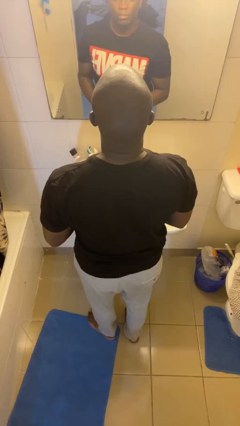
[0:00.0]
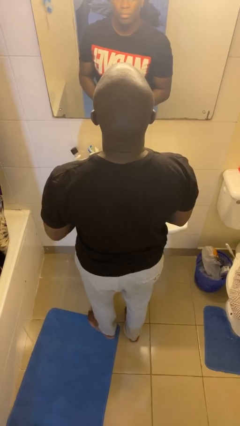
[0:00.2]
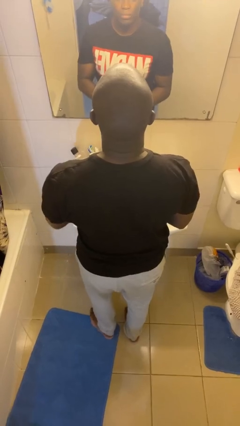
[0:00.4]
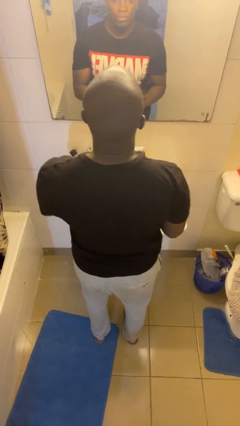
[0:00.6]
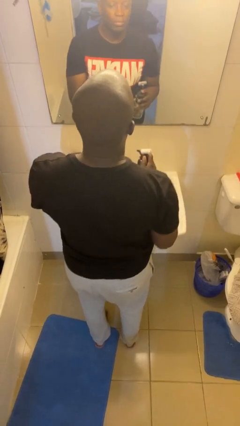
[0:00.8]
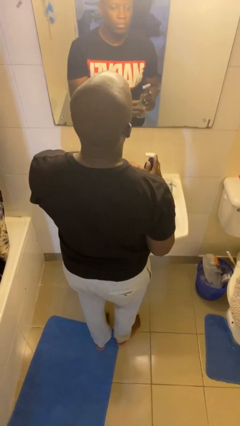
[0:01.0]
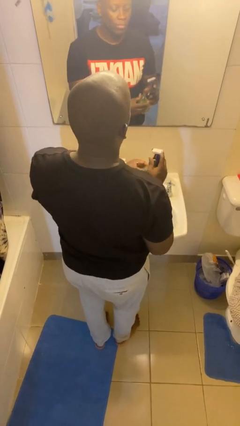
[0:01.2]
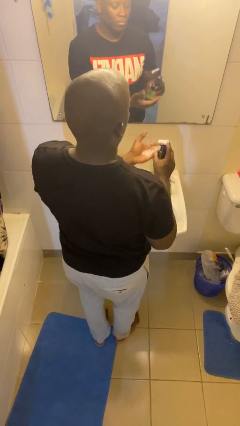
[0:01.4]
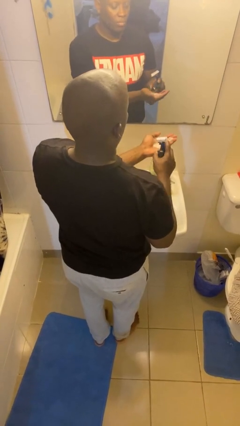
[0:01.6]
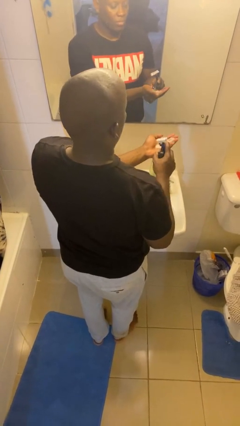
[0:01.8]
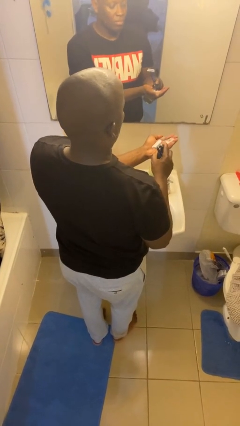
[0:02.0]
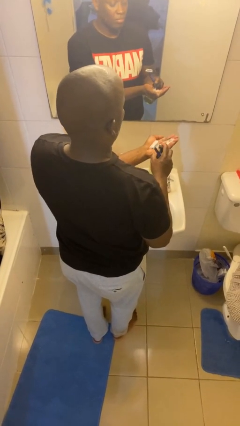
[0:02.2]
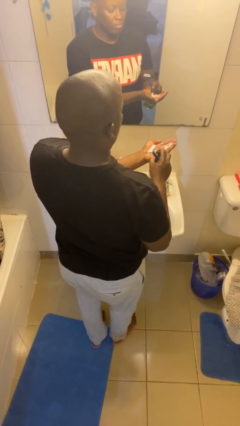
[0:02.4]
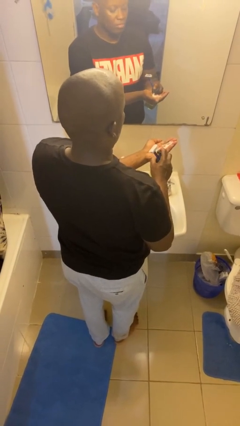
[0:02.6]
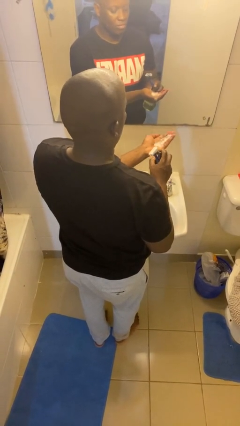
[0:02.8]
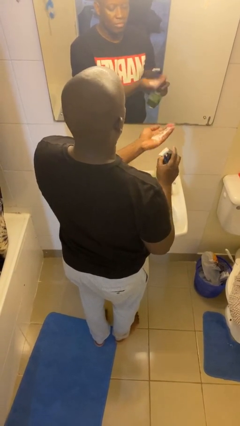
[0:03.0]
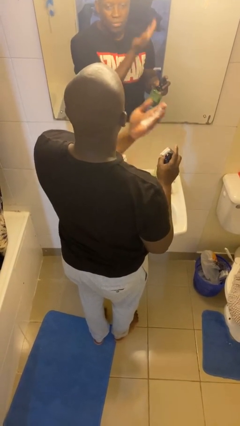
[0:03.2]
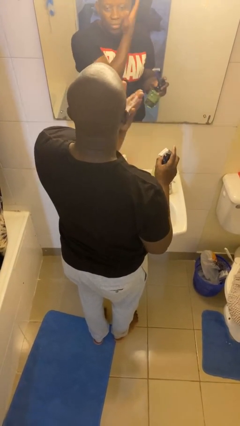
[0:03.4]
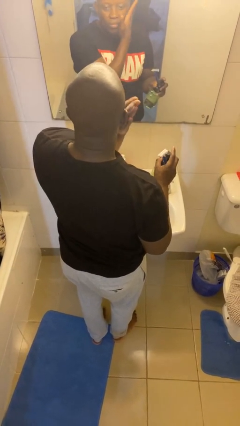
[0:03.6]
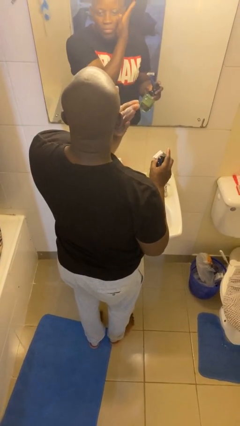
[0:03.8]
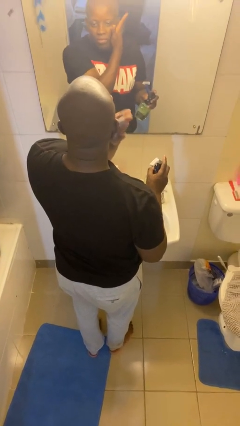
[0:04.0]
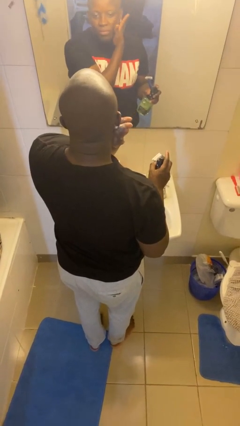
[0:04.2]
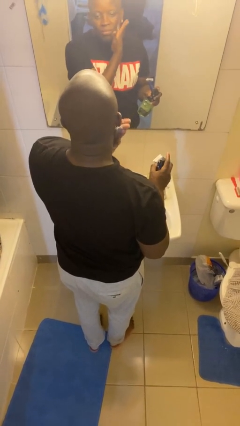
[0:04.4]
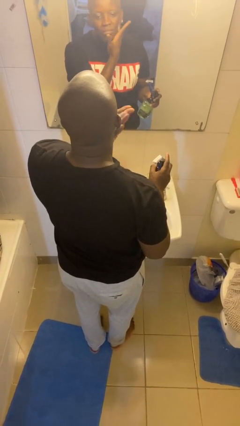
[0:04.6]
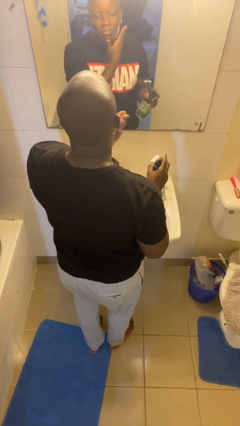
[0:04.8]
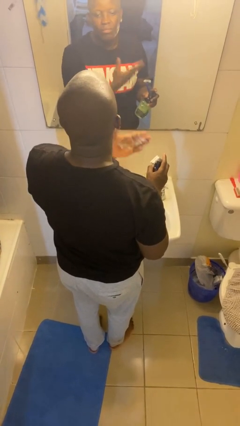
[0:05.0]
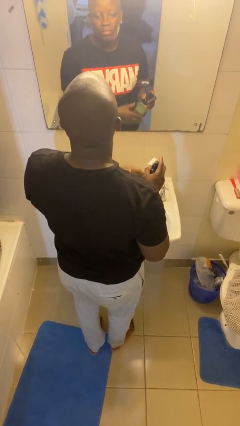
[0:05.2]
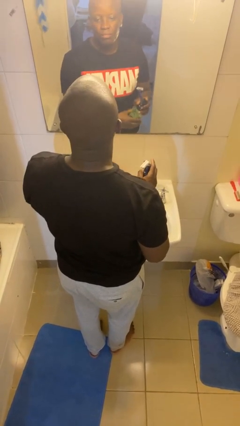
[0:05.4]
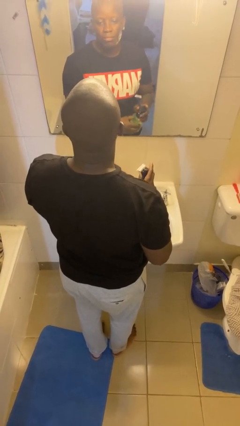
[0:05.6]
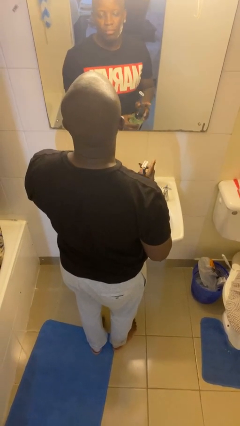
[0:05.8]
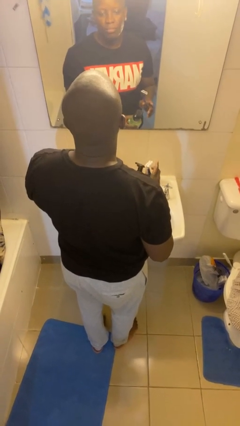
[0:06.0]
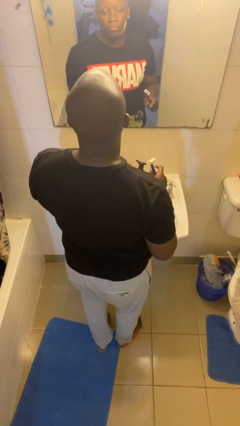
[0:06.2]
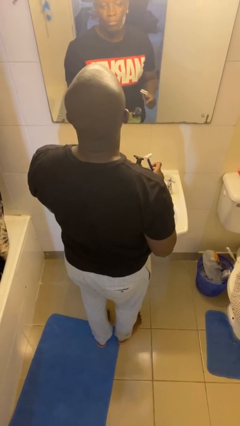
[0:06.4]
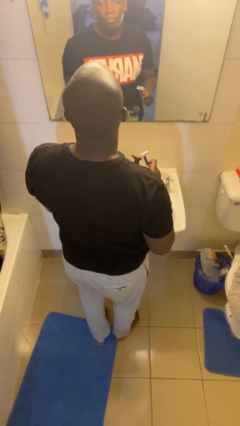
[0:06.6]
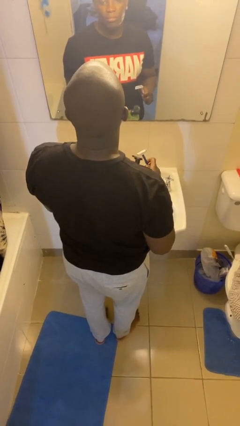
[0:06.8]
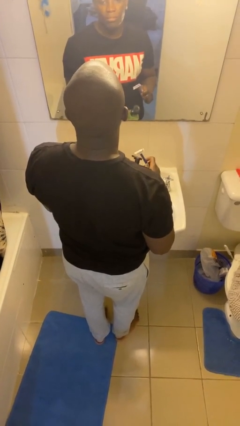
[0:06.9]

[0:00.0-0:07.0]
person applies shaving cream

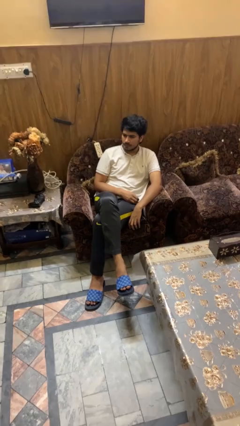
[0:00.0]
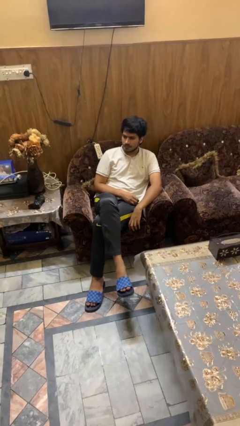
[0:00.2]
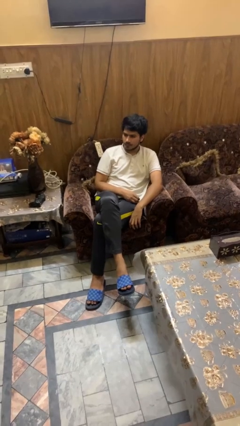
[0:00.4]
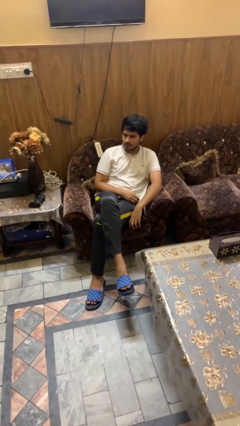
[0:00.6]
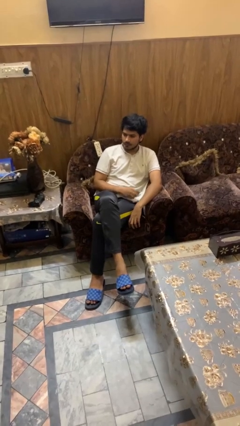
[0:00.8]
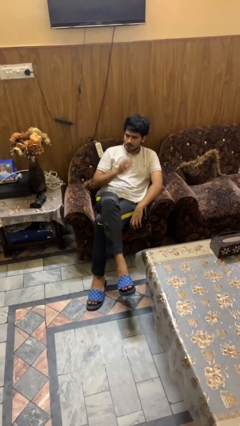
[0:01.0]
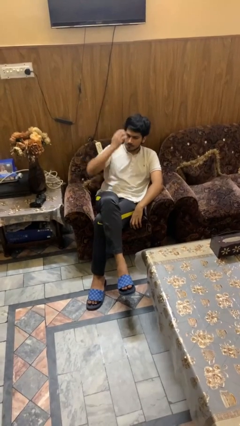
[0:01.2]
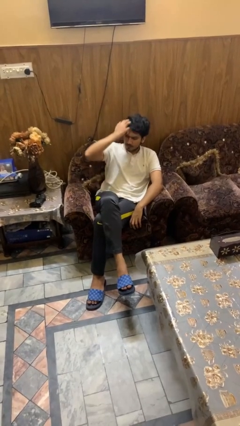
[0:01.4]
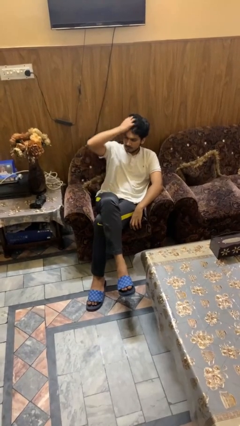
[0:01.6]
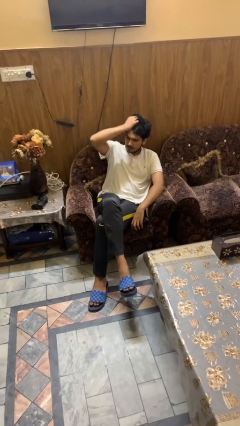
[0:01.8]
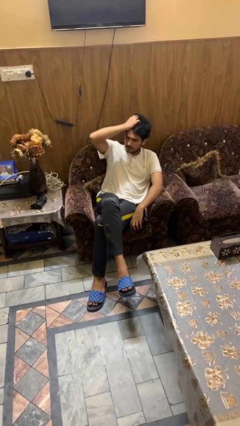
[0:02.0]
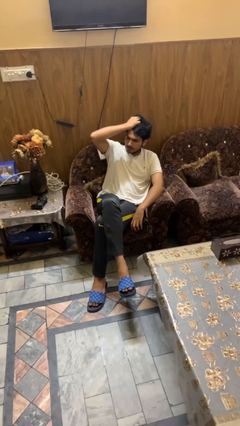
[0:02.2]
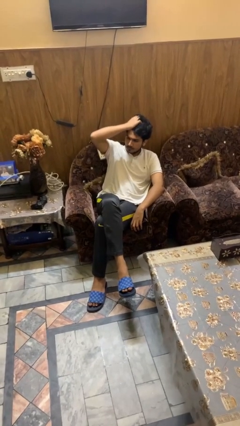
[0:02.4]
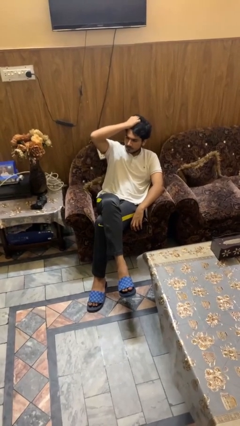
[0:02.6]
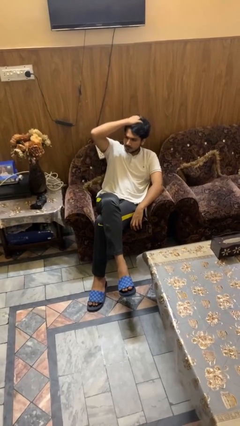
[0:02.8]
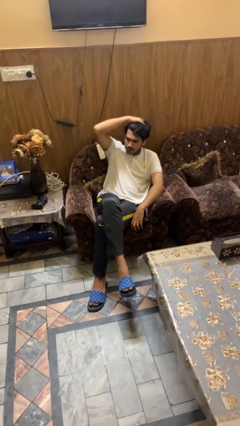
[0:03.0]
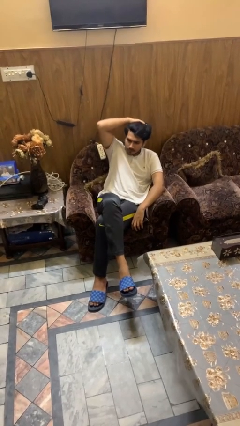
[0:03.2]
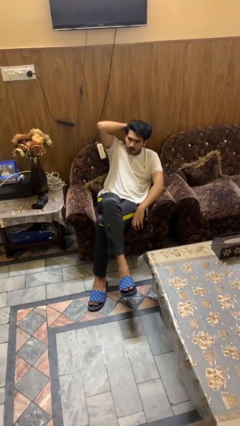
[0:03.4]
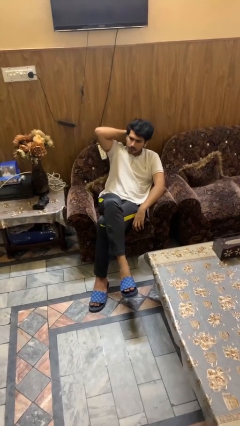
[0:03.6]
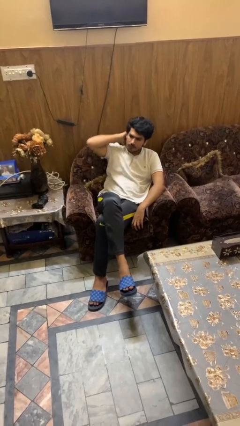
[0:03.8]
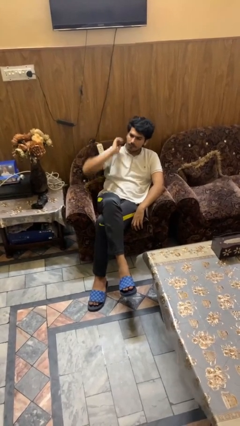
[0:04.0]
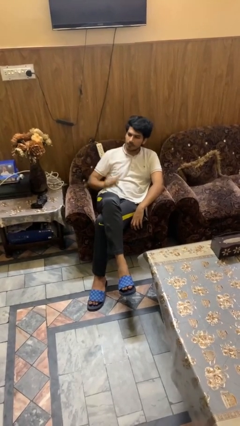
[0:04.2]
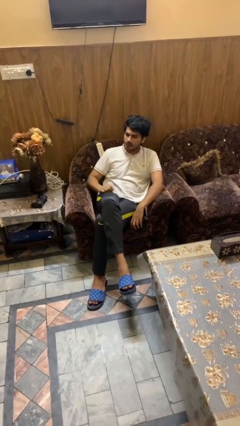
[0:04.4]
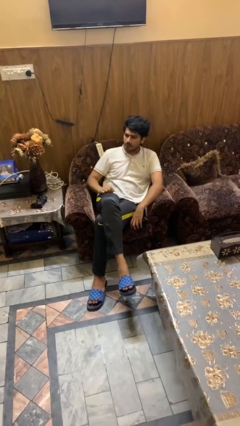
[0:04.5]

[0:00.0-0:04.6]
person scratches face

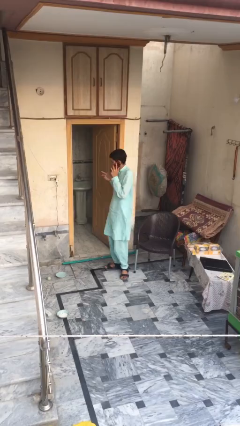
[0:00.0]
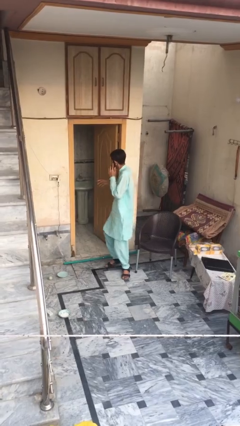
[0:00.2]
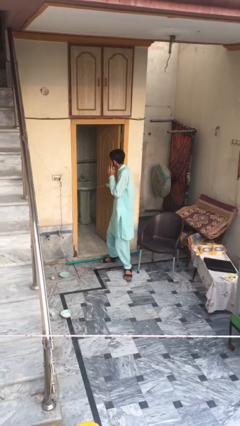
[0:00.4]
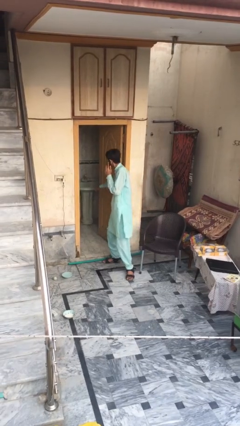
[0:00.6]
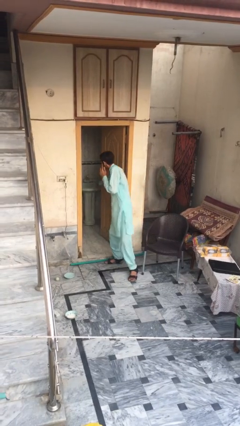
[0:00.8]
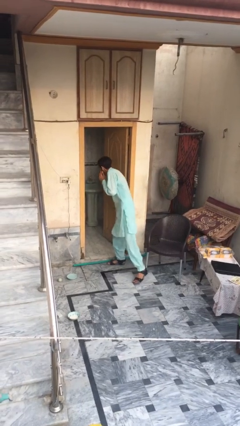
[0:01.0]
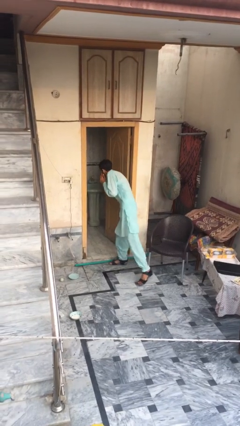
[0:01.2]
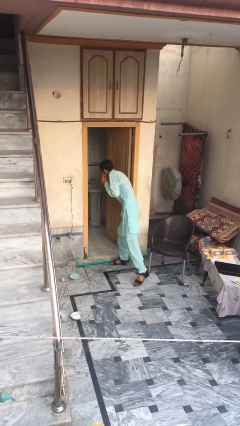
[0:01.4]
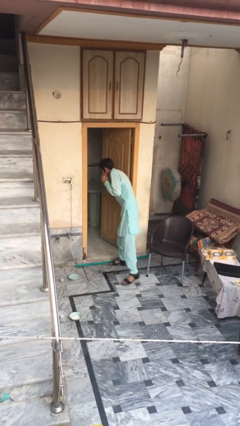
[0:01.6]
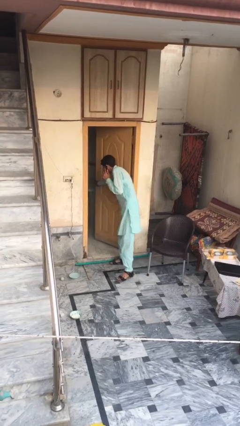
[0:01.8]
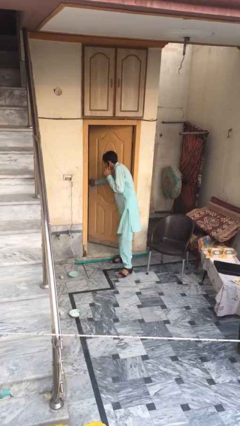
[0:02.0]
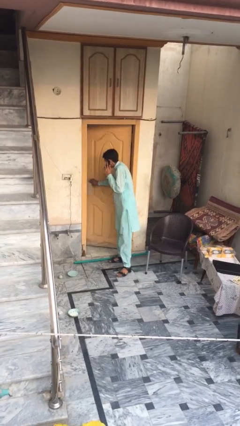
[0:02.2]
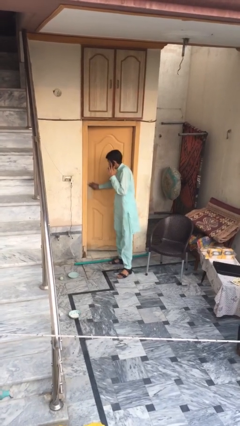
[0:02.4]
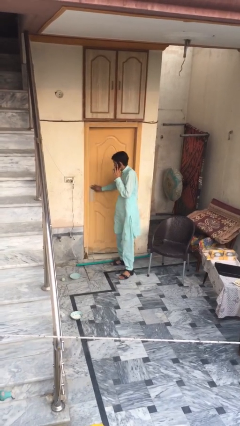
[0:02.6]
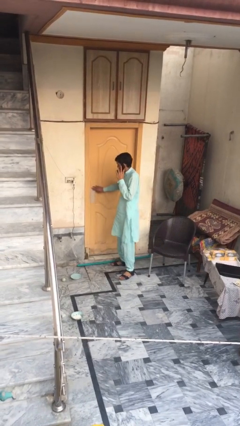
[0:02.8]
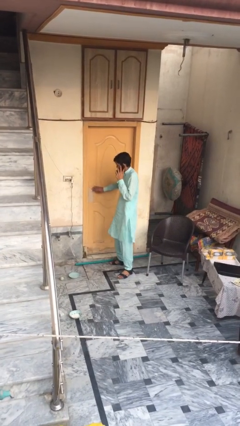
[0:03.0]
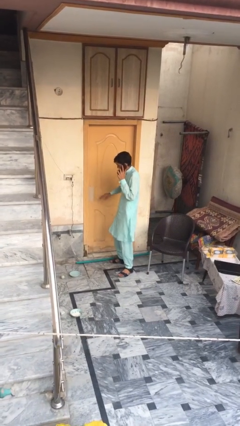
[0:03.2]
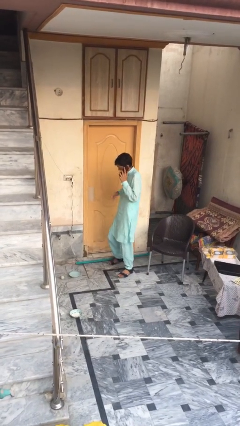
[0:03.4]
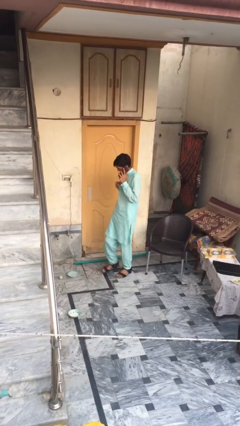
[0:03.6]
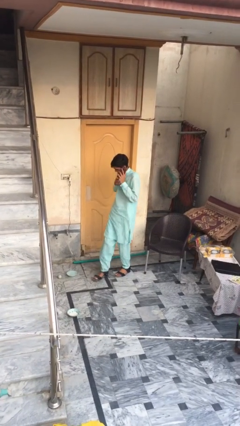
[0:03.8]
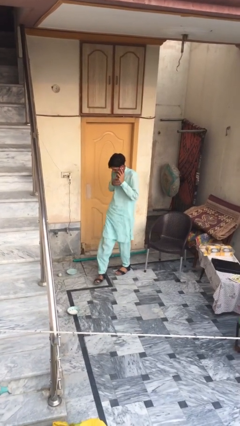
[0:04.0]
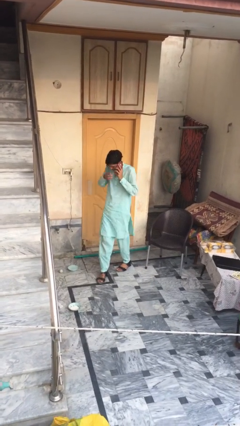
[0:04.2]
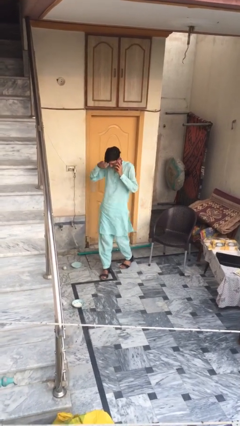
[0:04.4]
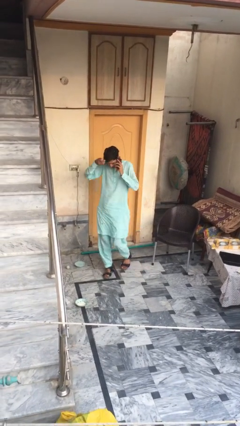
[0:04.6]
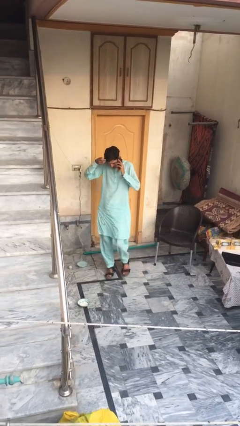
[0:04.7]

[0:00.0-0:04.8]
person closes facility door

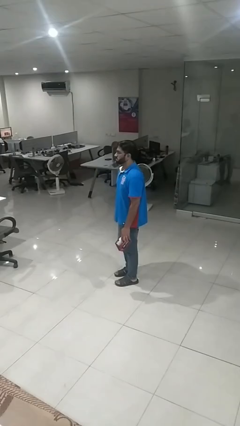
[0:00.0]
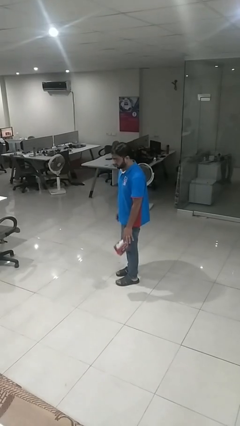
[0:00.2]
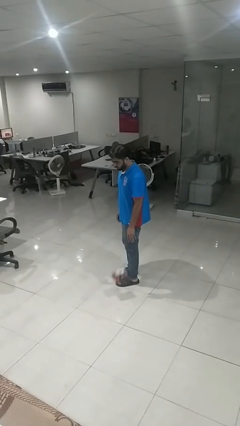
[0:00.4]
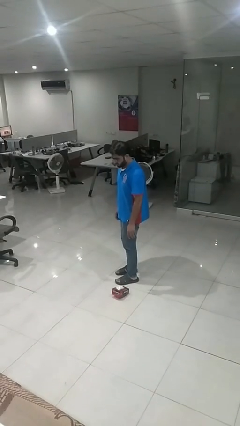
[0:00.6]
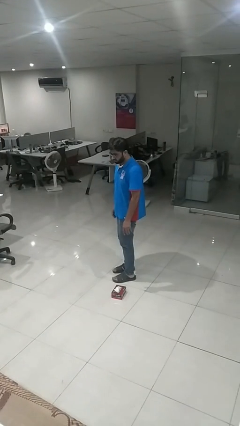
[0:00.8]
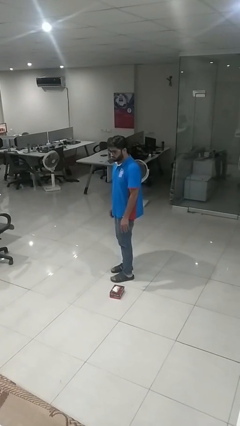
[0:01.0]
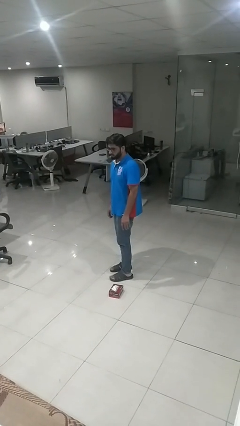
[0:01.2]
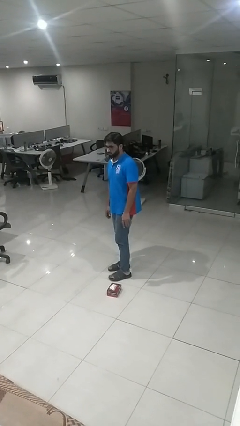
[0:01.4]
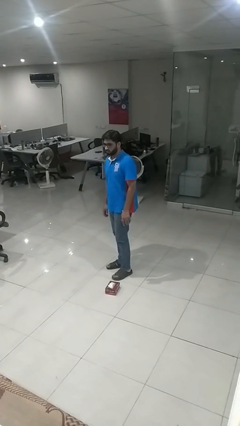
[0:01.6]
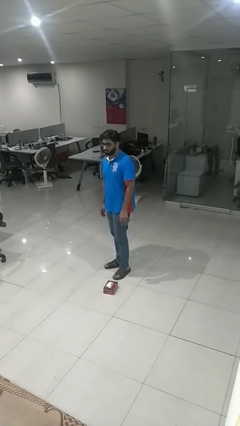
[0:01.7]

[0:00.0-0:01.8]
person drops object
